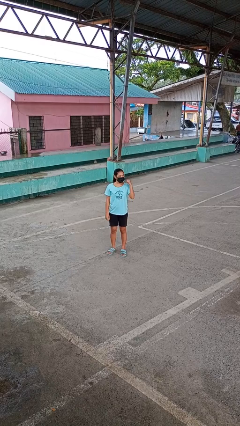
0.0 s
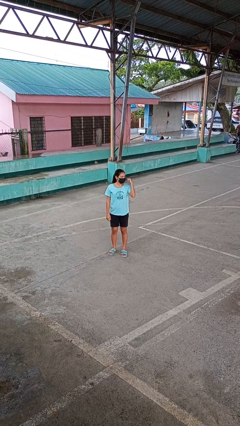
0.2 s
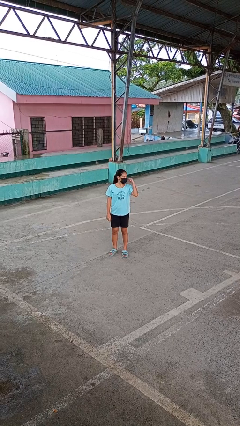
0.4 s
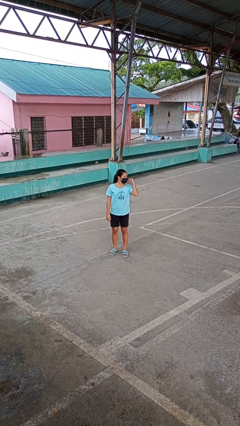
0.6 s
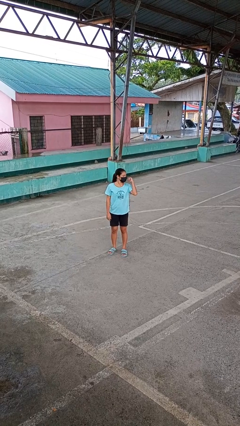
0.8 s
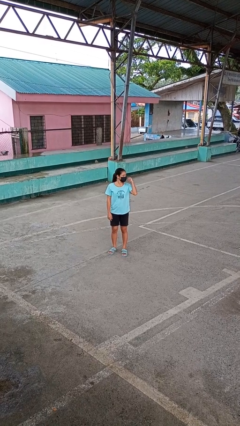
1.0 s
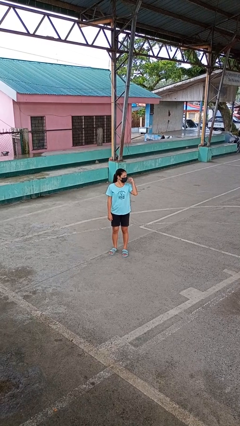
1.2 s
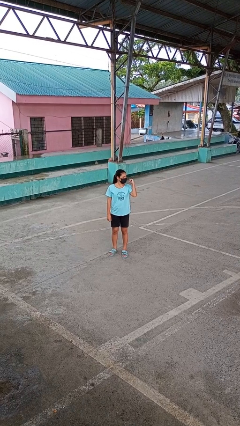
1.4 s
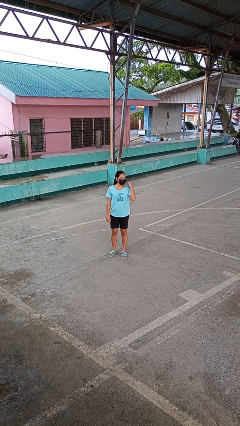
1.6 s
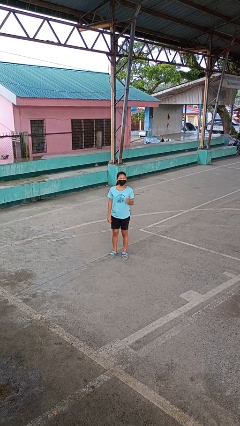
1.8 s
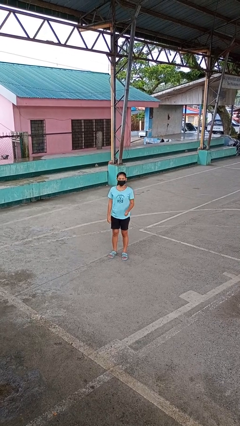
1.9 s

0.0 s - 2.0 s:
person gestures behind me

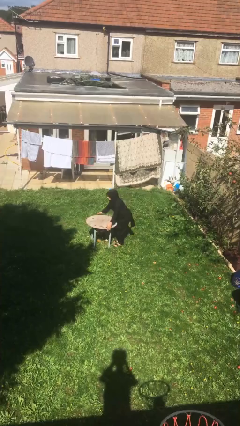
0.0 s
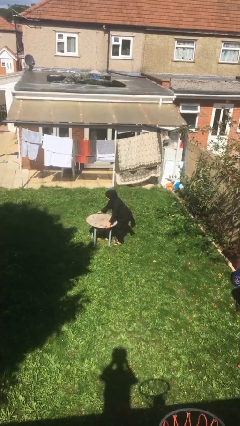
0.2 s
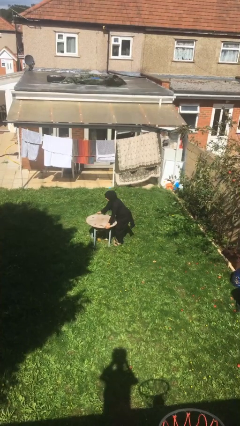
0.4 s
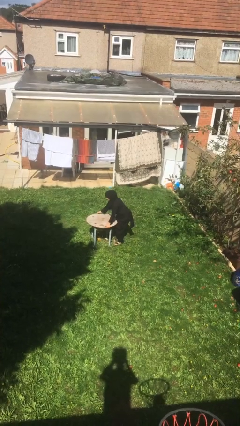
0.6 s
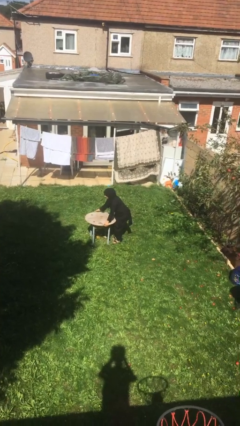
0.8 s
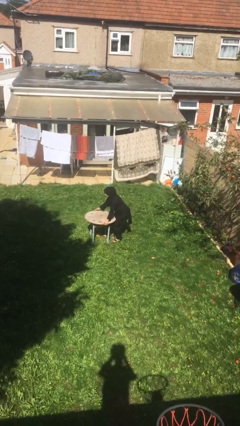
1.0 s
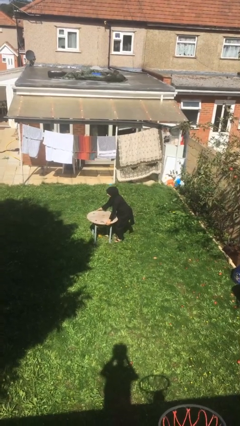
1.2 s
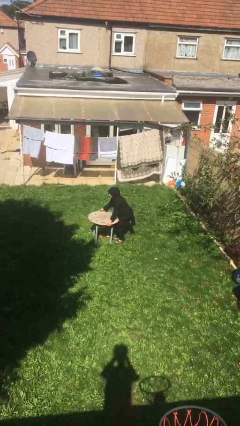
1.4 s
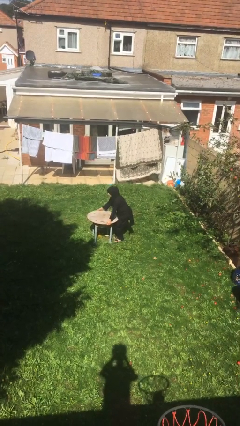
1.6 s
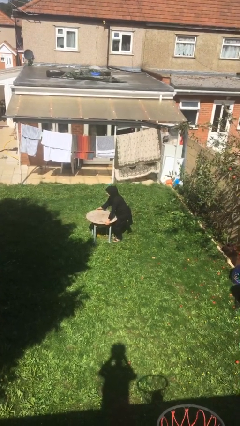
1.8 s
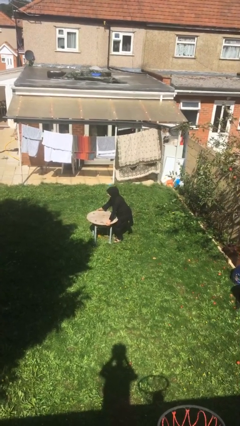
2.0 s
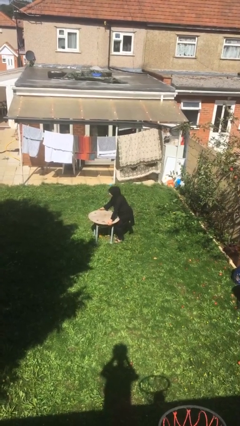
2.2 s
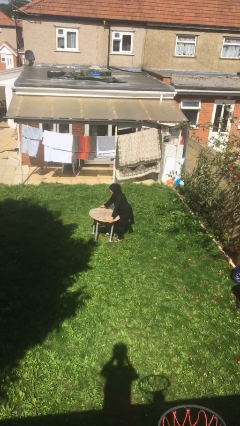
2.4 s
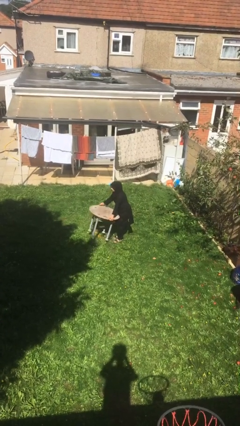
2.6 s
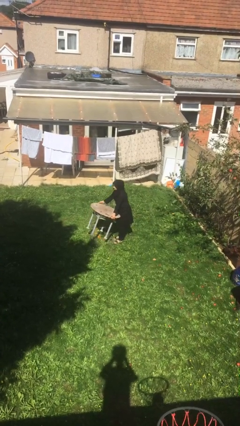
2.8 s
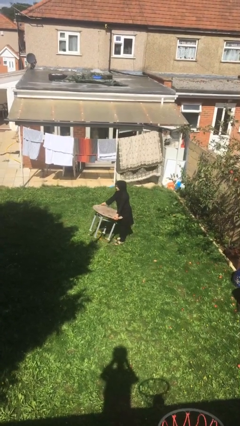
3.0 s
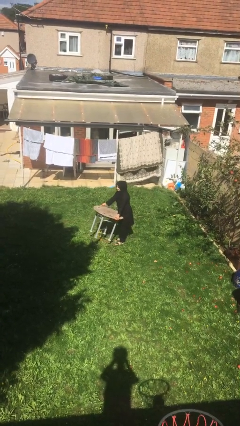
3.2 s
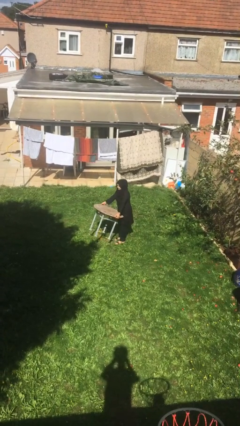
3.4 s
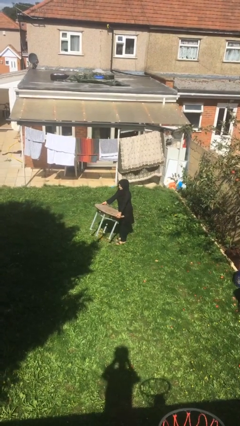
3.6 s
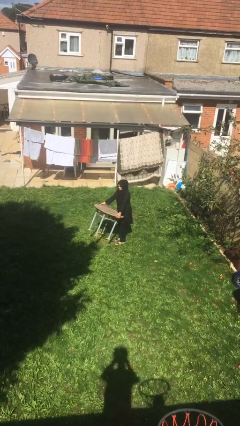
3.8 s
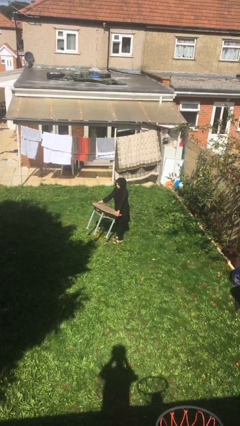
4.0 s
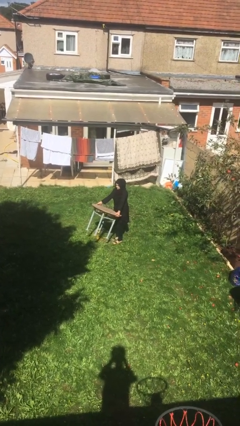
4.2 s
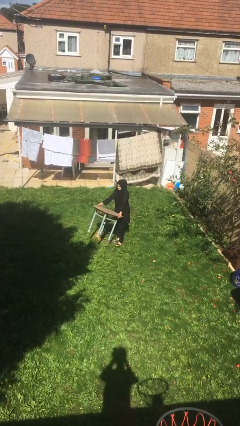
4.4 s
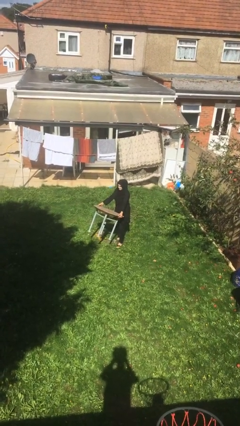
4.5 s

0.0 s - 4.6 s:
person picks up object from floor

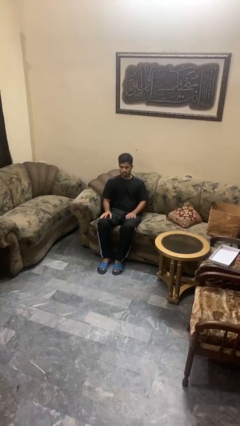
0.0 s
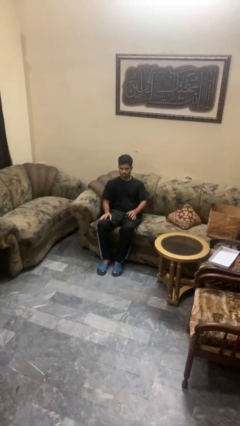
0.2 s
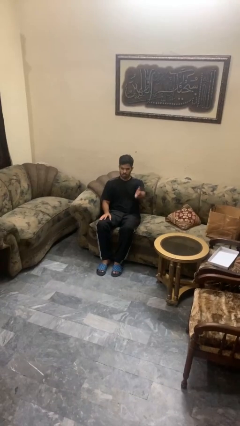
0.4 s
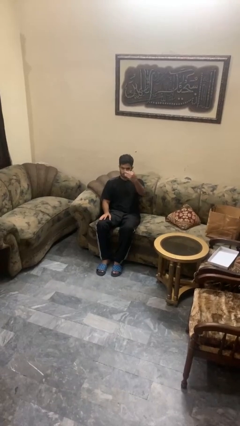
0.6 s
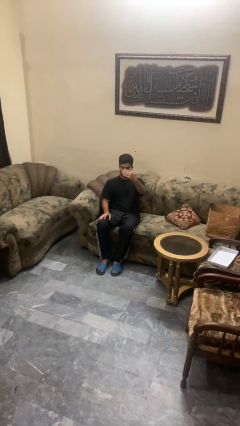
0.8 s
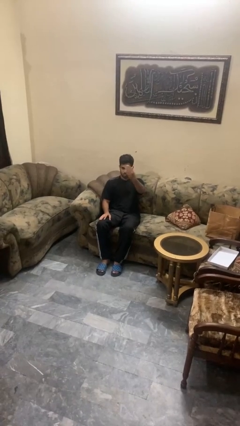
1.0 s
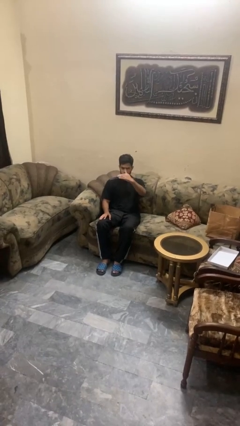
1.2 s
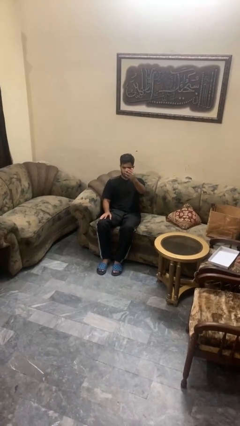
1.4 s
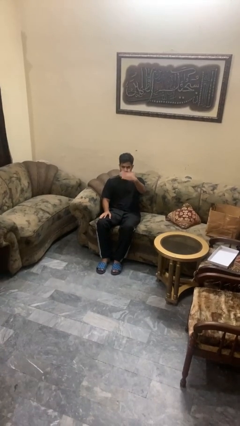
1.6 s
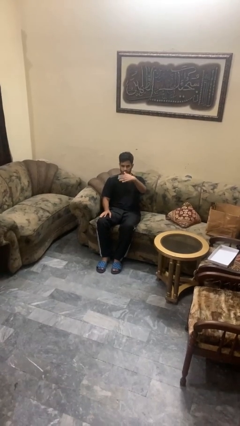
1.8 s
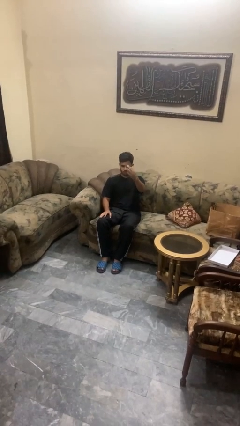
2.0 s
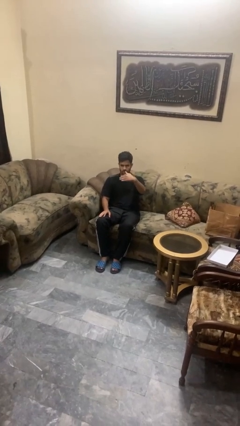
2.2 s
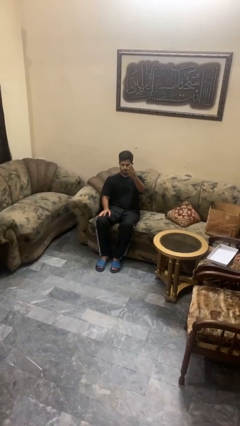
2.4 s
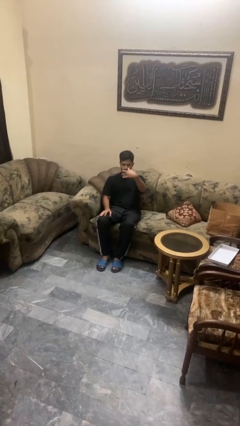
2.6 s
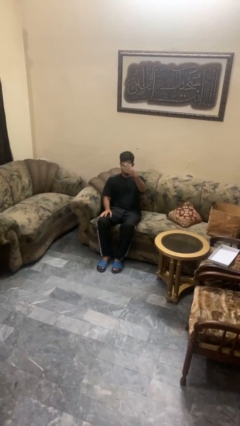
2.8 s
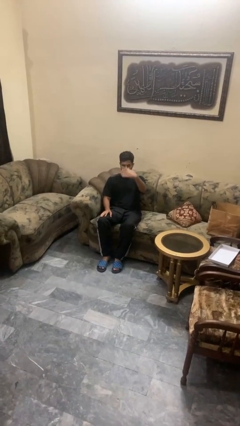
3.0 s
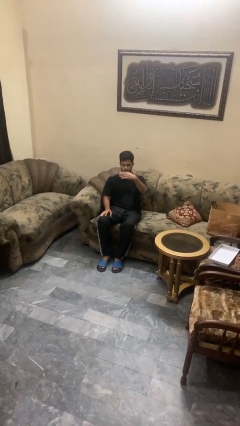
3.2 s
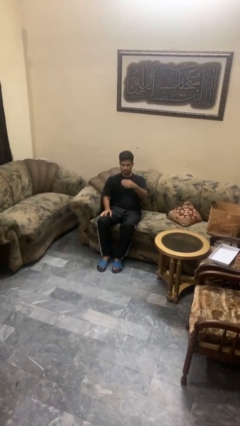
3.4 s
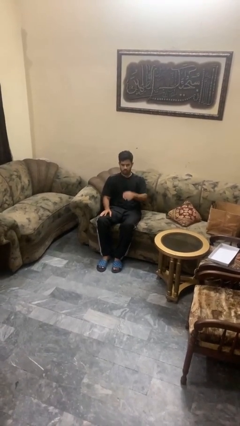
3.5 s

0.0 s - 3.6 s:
person gestures come here

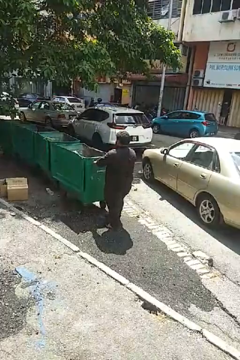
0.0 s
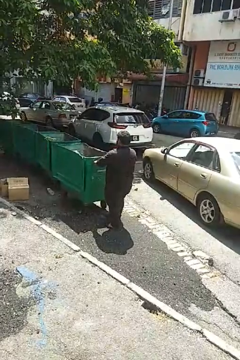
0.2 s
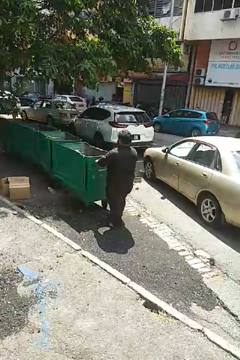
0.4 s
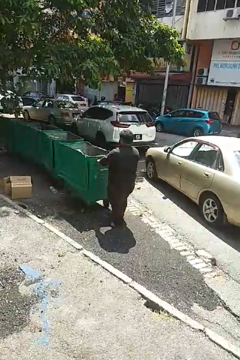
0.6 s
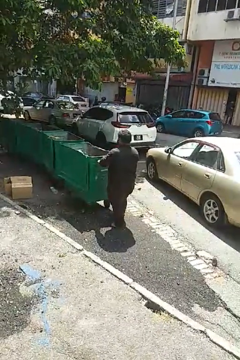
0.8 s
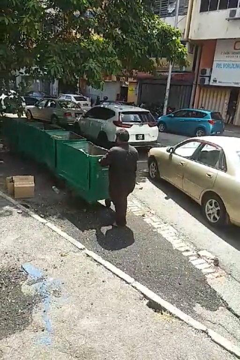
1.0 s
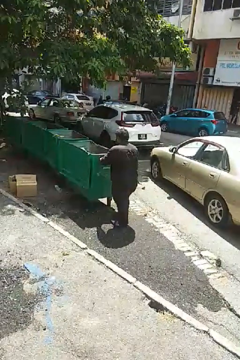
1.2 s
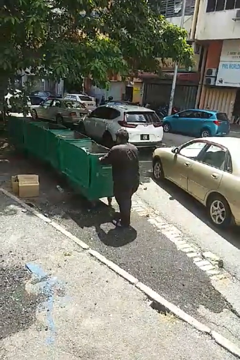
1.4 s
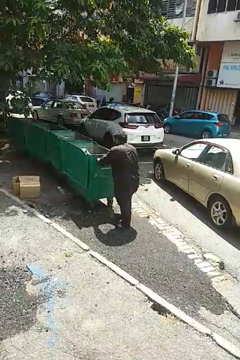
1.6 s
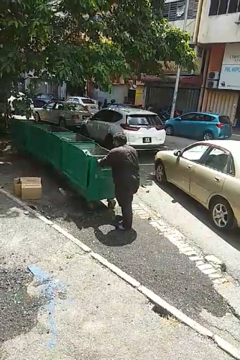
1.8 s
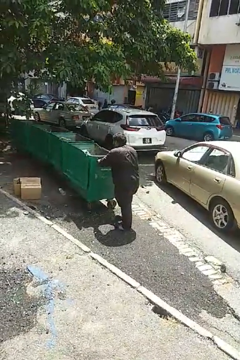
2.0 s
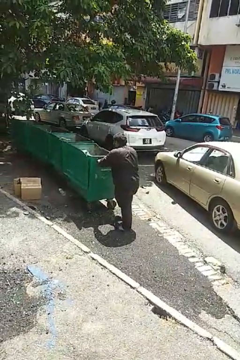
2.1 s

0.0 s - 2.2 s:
person pushes wheeled trashcan

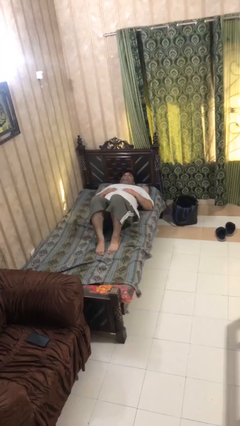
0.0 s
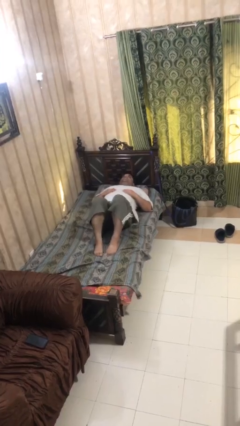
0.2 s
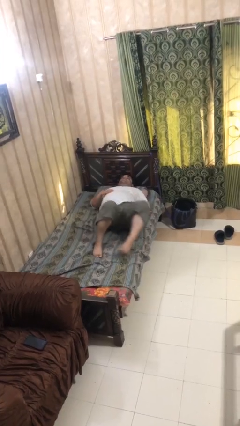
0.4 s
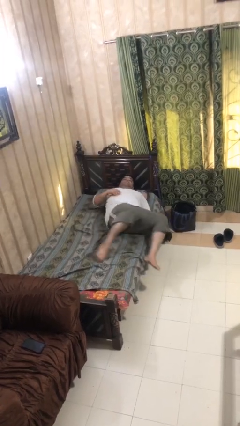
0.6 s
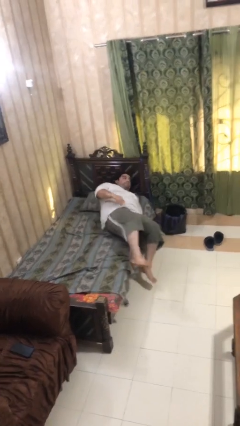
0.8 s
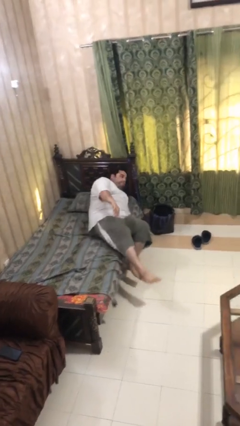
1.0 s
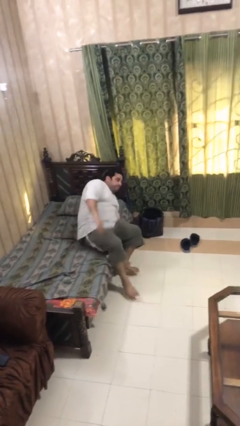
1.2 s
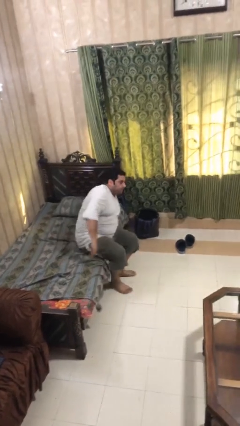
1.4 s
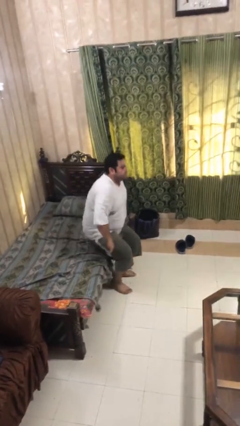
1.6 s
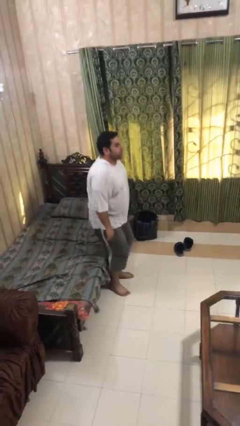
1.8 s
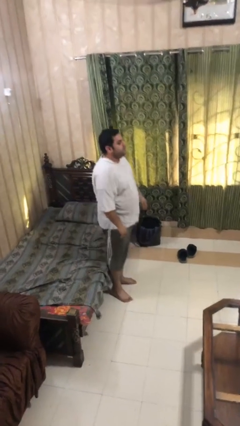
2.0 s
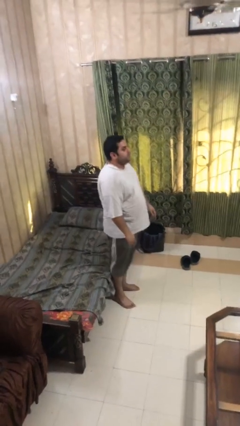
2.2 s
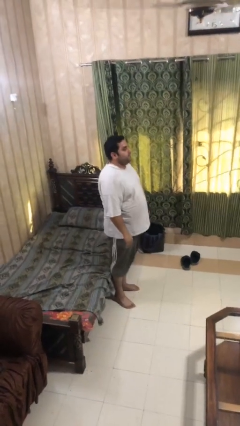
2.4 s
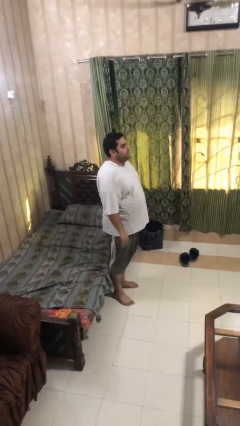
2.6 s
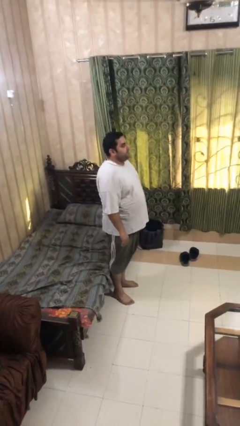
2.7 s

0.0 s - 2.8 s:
person stands up

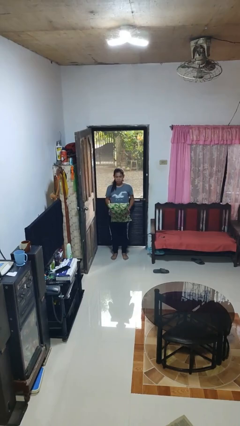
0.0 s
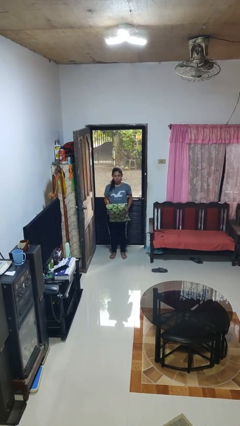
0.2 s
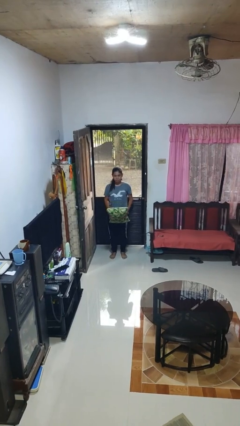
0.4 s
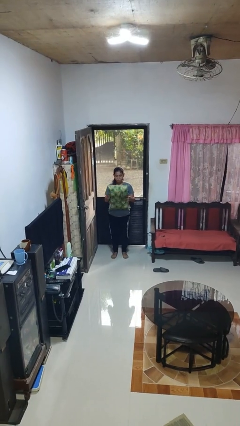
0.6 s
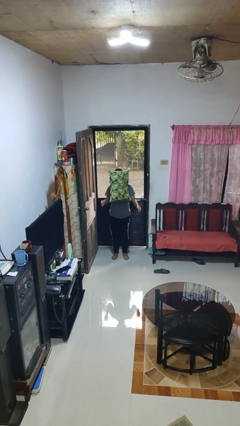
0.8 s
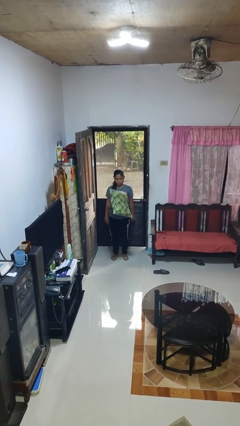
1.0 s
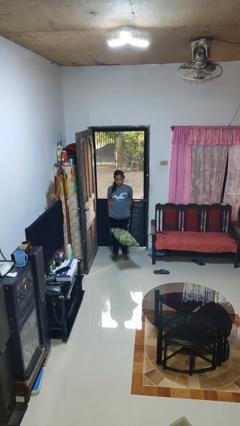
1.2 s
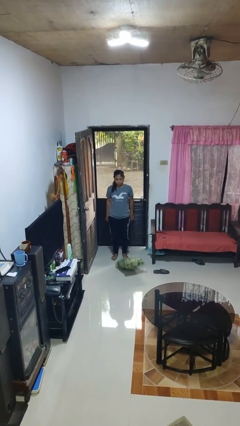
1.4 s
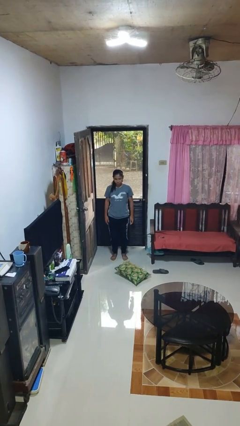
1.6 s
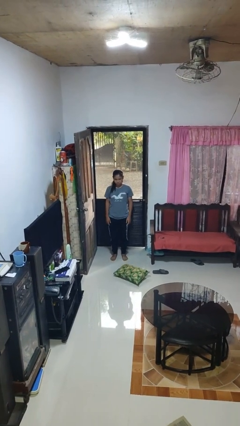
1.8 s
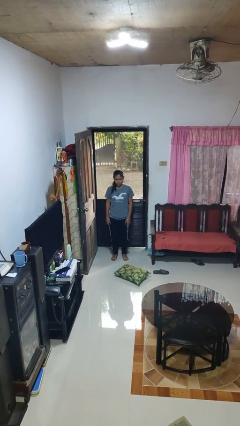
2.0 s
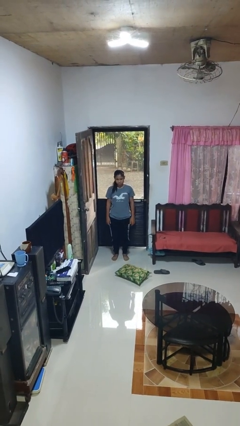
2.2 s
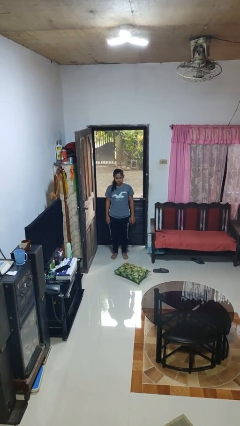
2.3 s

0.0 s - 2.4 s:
person throws object into air

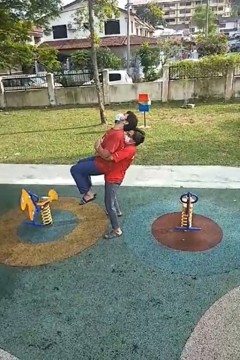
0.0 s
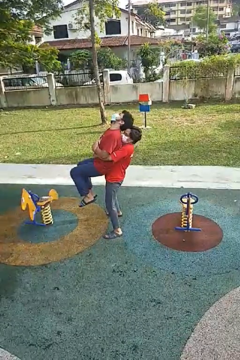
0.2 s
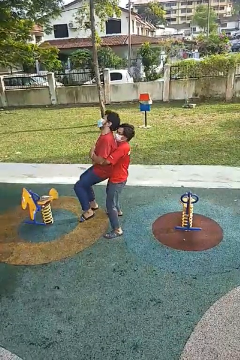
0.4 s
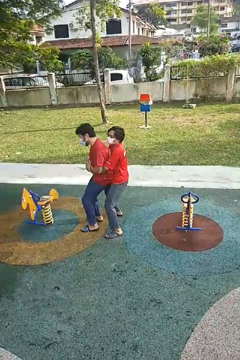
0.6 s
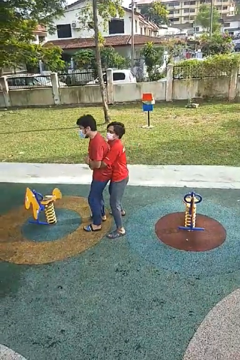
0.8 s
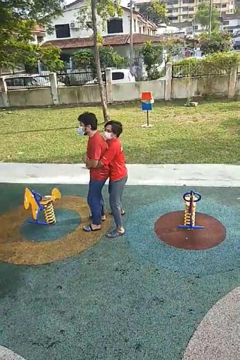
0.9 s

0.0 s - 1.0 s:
person puts down person
